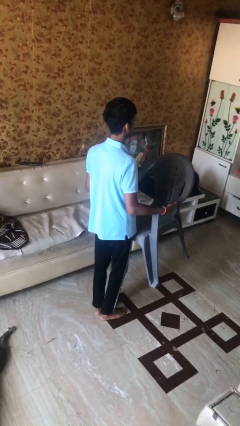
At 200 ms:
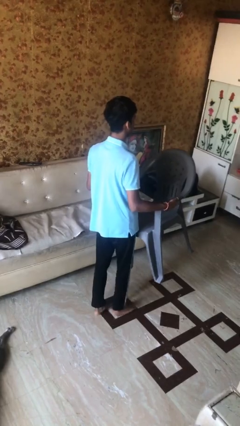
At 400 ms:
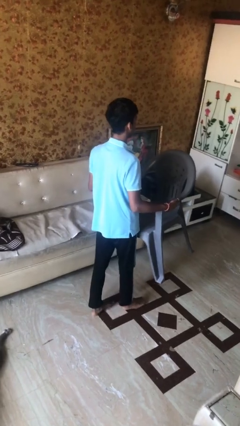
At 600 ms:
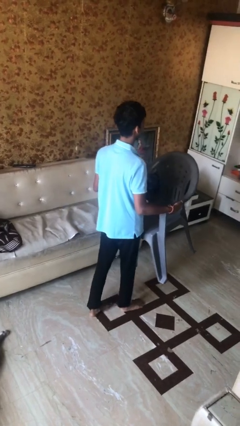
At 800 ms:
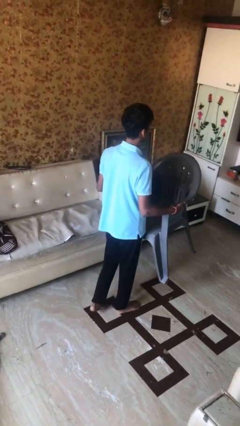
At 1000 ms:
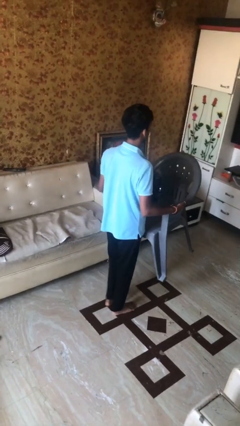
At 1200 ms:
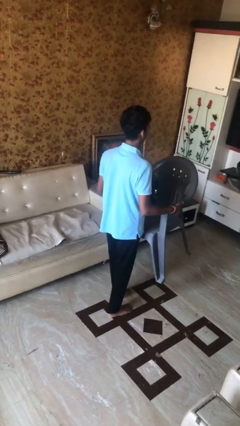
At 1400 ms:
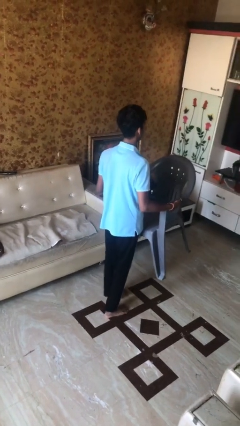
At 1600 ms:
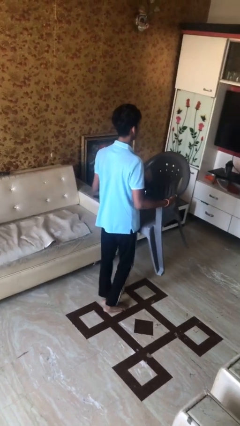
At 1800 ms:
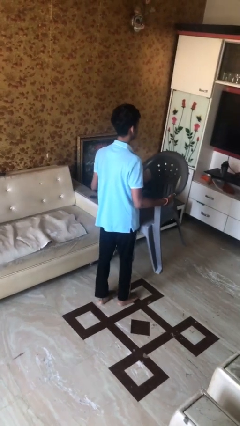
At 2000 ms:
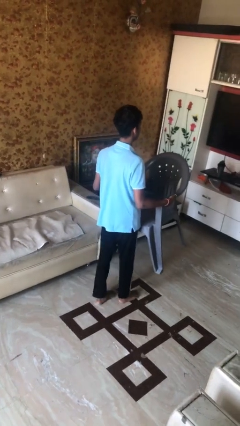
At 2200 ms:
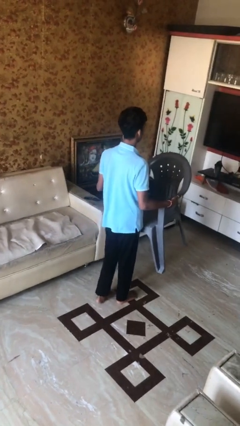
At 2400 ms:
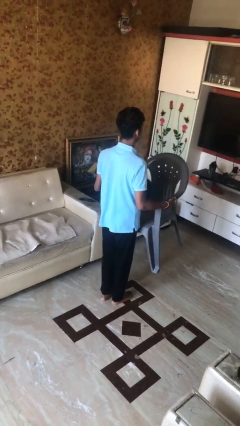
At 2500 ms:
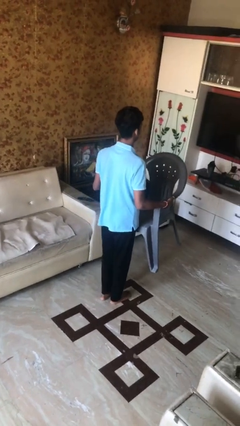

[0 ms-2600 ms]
person carries furniture

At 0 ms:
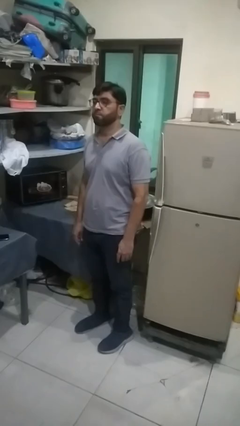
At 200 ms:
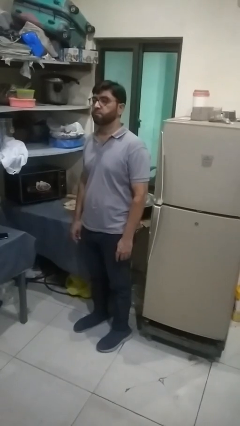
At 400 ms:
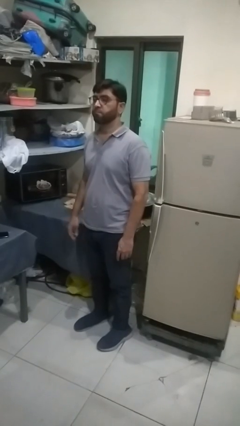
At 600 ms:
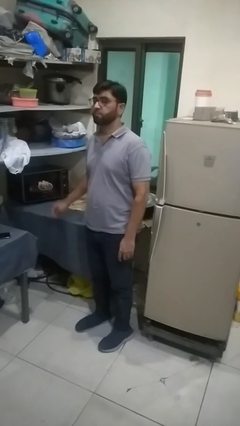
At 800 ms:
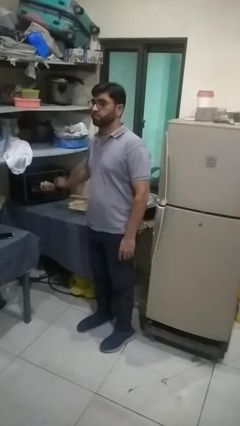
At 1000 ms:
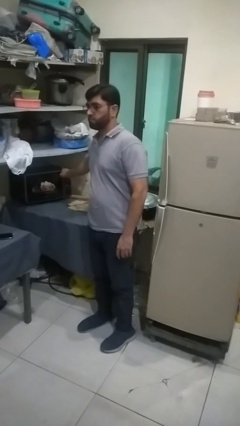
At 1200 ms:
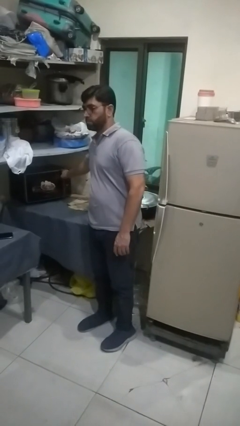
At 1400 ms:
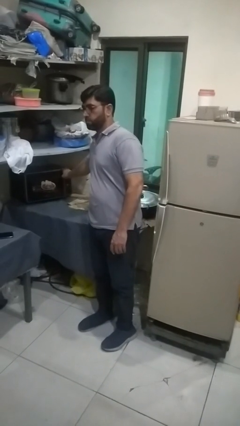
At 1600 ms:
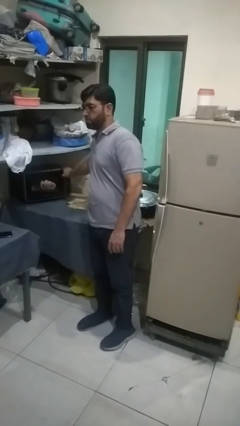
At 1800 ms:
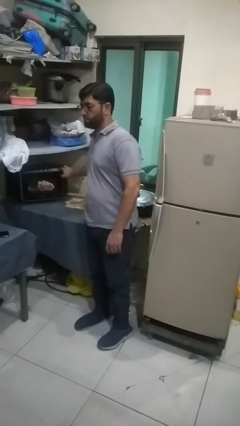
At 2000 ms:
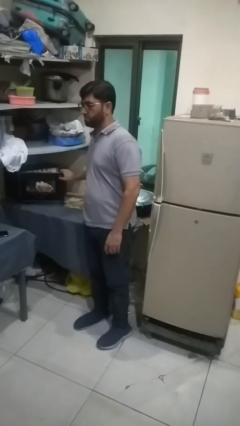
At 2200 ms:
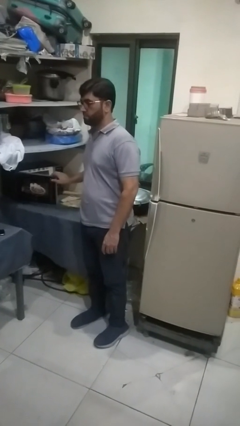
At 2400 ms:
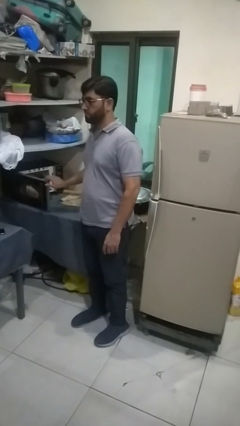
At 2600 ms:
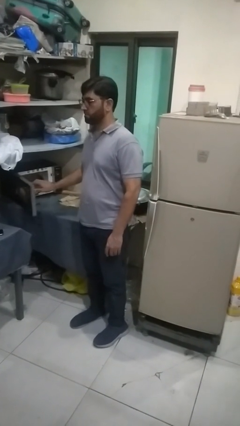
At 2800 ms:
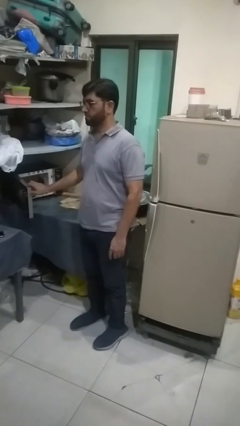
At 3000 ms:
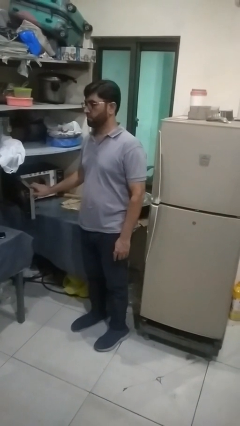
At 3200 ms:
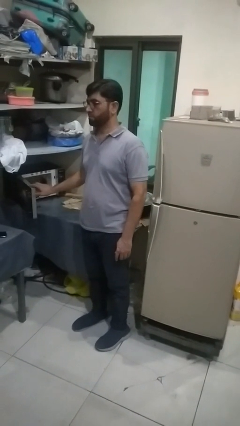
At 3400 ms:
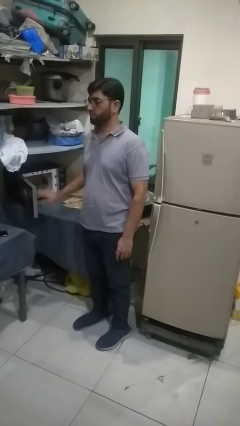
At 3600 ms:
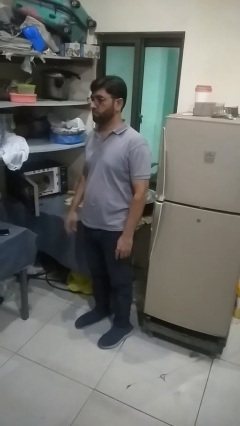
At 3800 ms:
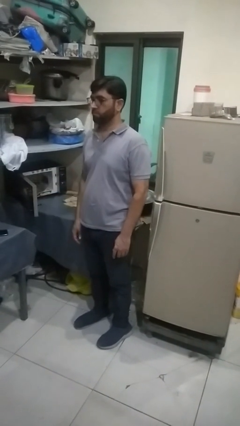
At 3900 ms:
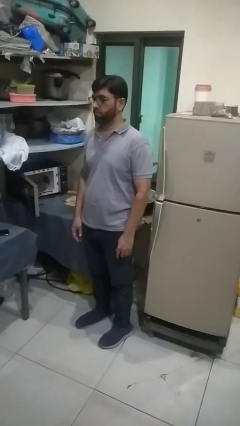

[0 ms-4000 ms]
person opens oven door

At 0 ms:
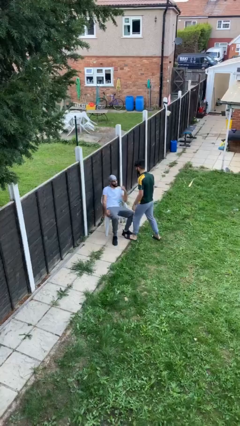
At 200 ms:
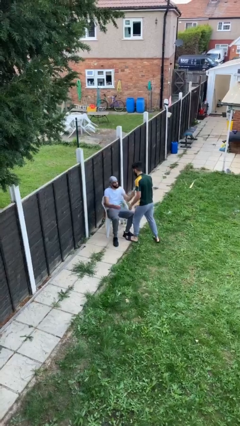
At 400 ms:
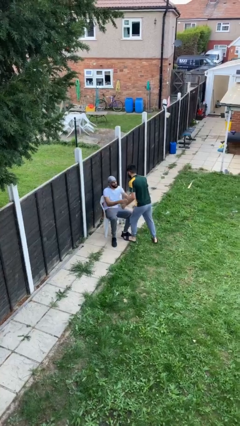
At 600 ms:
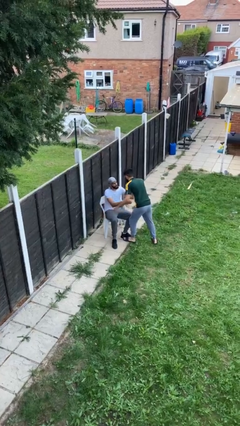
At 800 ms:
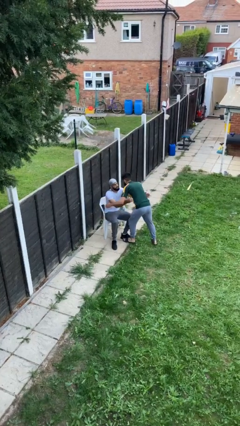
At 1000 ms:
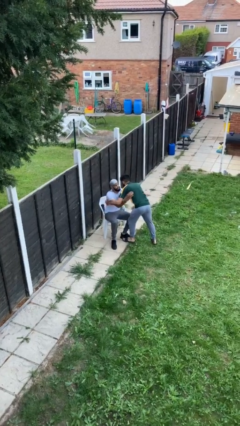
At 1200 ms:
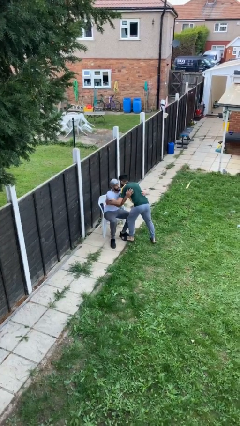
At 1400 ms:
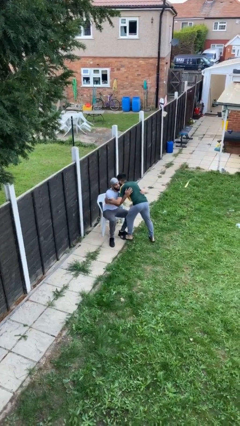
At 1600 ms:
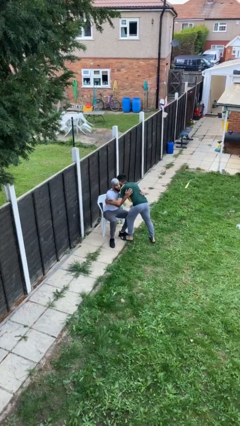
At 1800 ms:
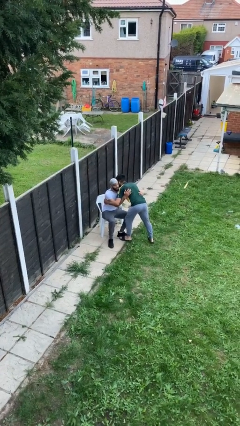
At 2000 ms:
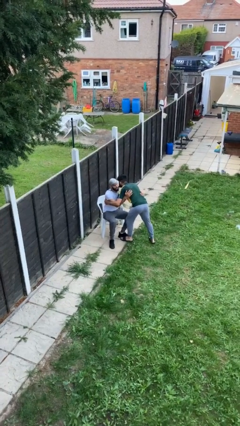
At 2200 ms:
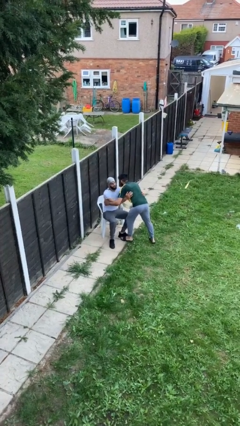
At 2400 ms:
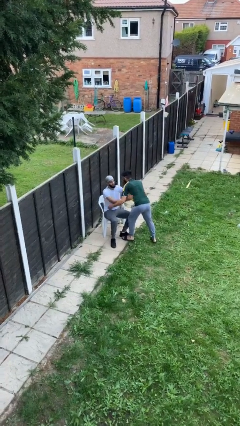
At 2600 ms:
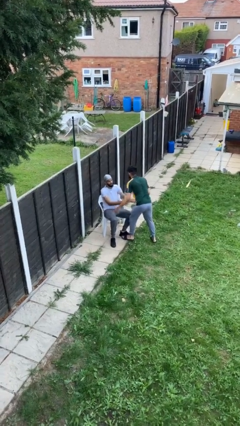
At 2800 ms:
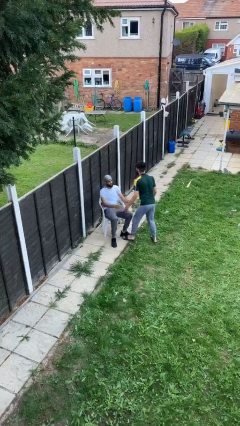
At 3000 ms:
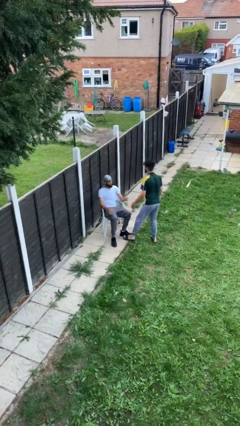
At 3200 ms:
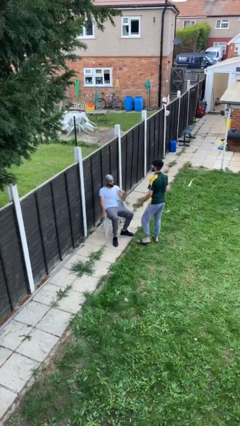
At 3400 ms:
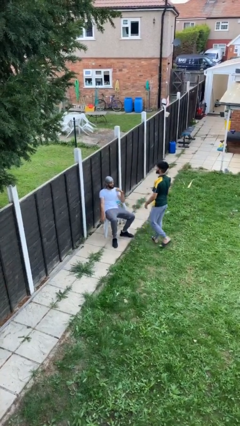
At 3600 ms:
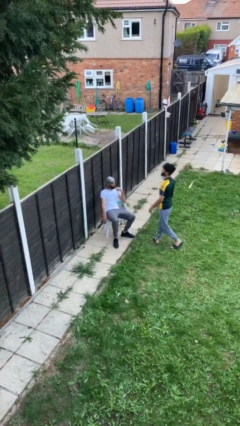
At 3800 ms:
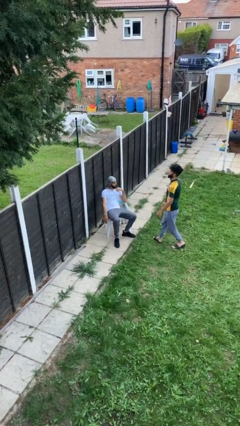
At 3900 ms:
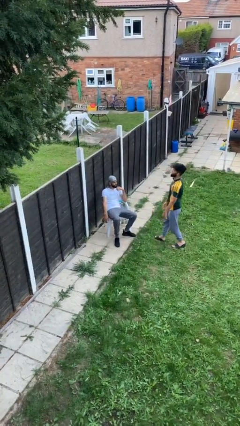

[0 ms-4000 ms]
person embraces person

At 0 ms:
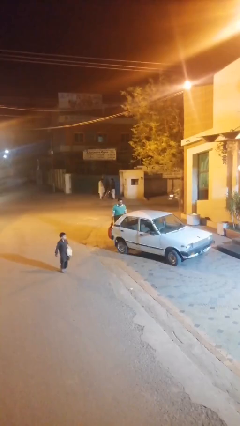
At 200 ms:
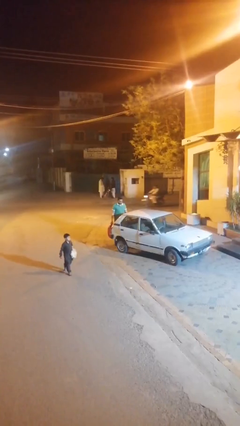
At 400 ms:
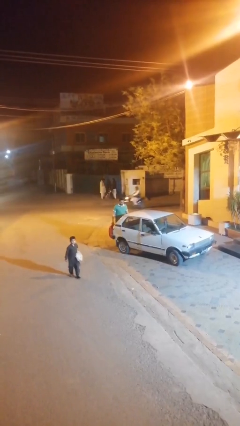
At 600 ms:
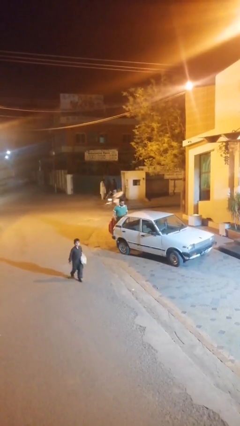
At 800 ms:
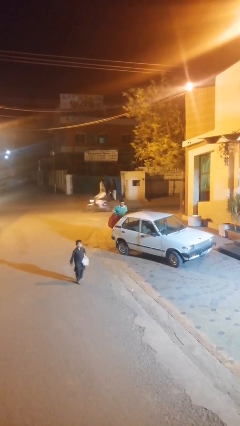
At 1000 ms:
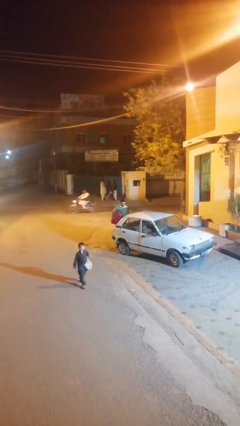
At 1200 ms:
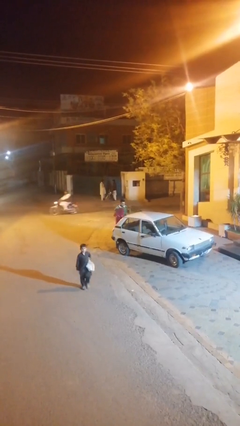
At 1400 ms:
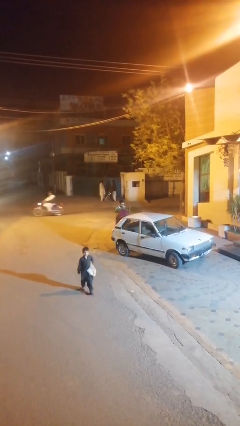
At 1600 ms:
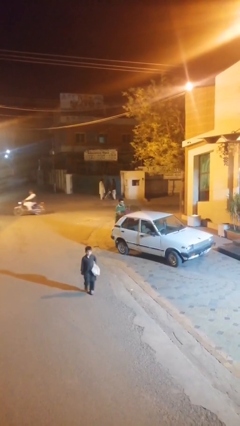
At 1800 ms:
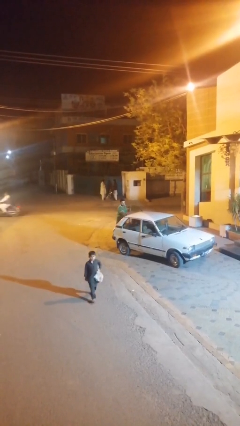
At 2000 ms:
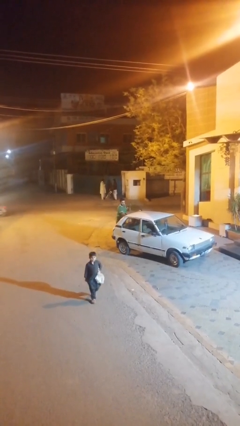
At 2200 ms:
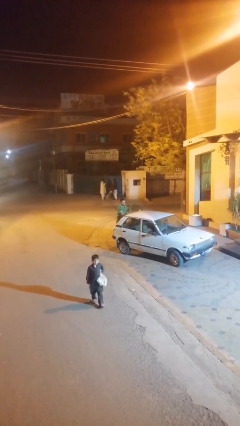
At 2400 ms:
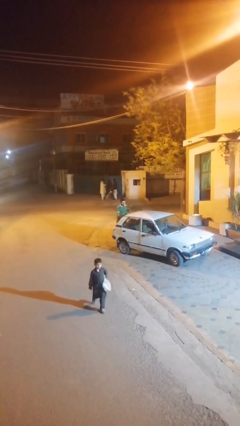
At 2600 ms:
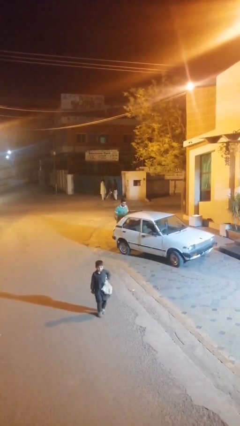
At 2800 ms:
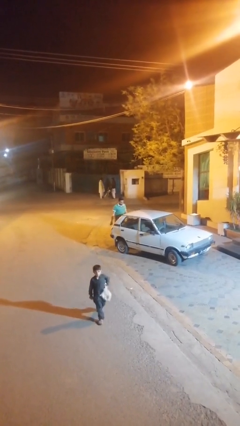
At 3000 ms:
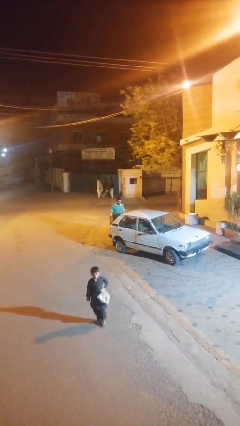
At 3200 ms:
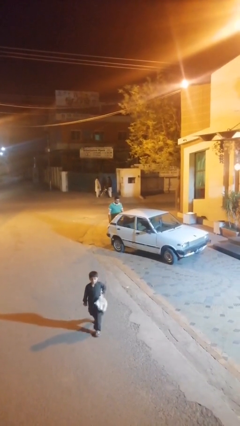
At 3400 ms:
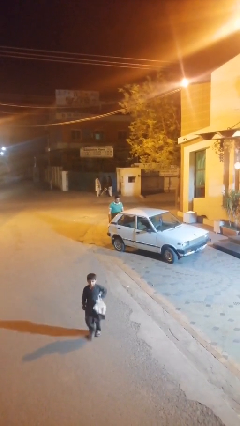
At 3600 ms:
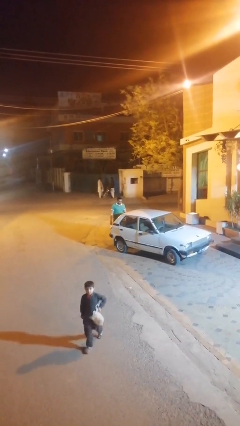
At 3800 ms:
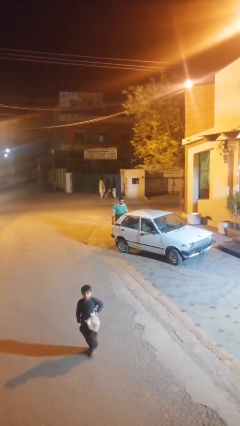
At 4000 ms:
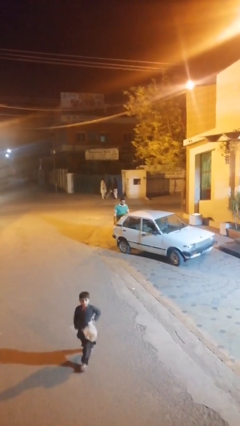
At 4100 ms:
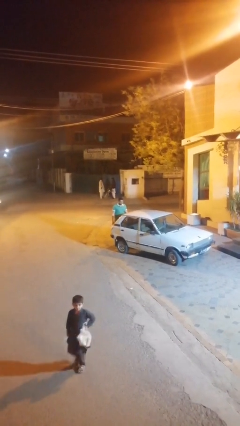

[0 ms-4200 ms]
person loads car

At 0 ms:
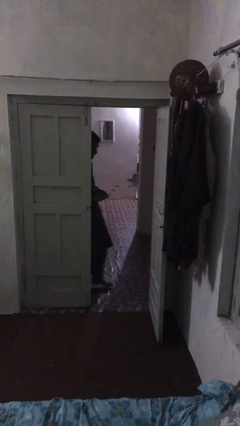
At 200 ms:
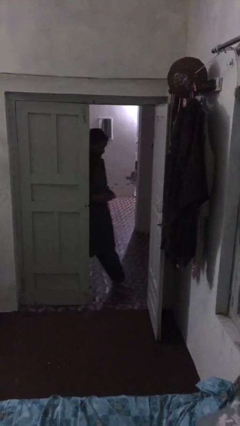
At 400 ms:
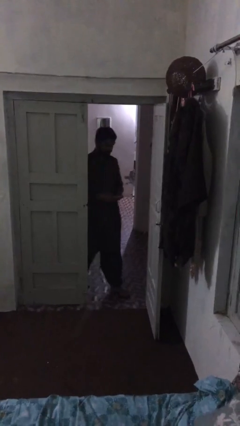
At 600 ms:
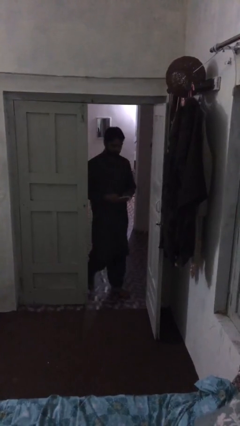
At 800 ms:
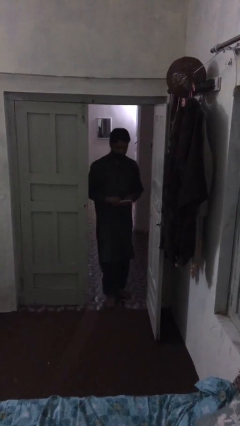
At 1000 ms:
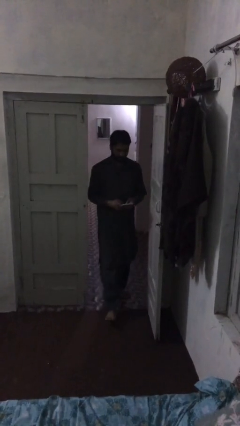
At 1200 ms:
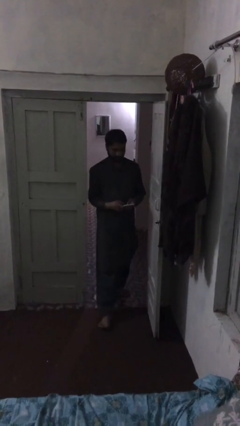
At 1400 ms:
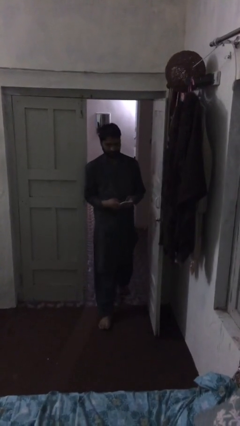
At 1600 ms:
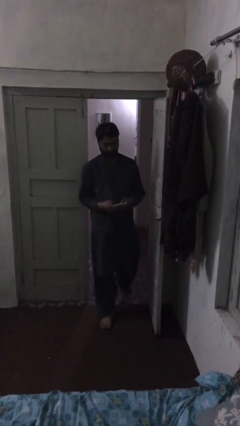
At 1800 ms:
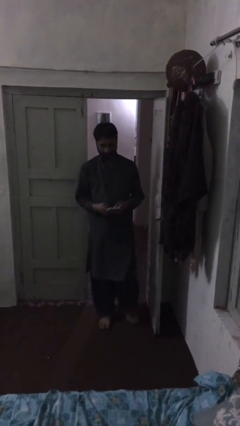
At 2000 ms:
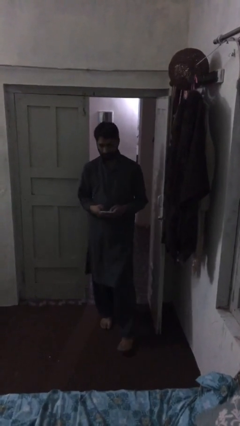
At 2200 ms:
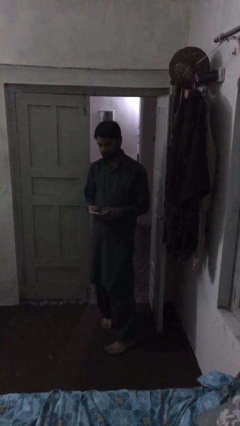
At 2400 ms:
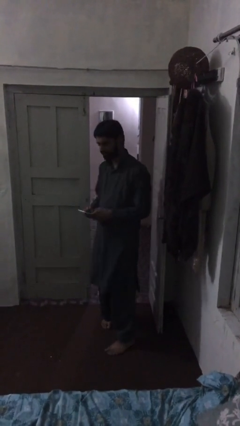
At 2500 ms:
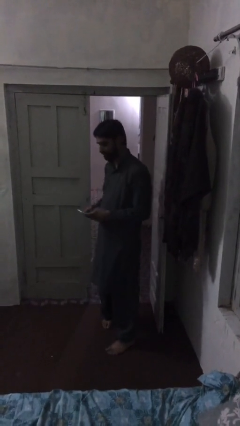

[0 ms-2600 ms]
person enters scene through structure

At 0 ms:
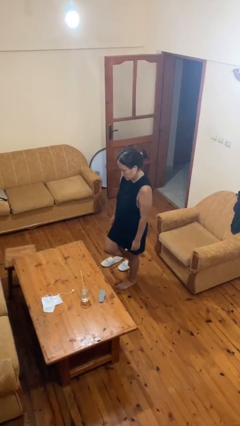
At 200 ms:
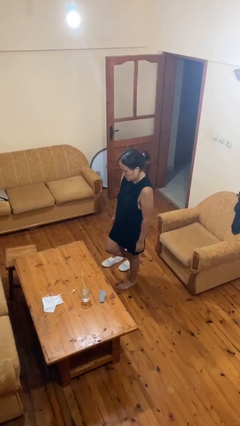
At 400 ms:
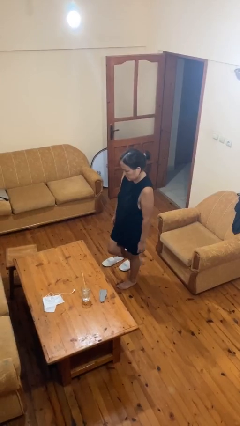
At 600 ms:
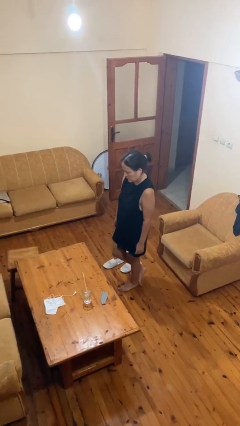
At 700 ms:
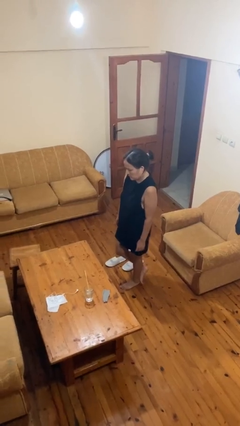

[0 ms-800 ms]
person climbs off table
